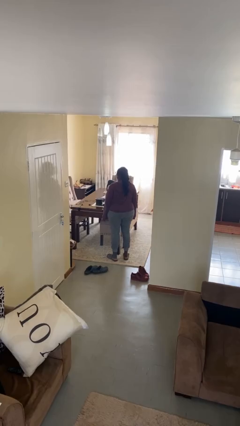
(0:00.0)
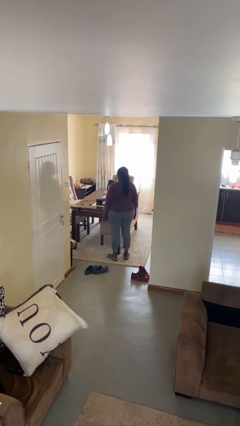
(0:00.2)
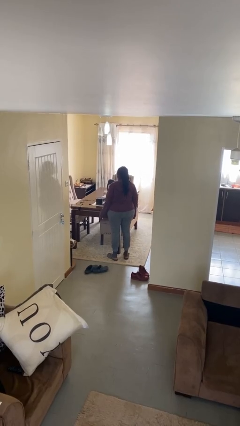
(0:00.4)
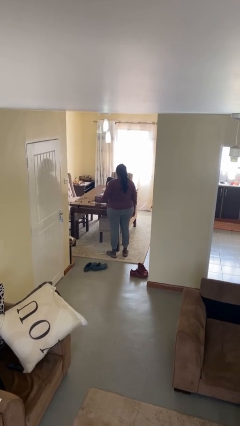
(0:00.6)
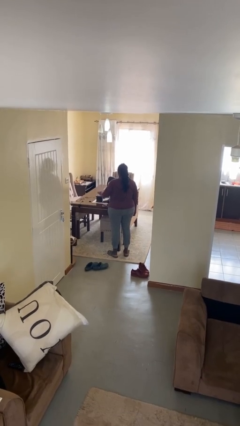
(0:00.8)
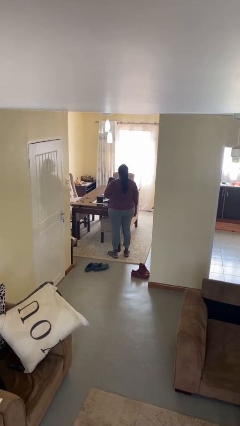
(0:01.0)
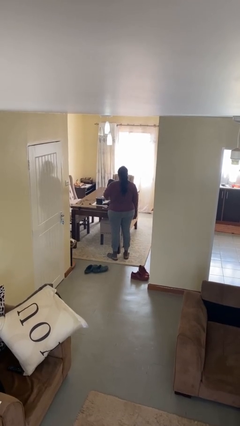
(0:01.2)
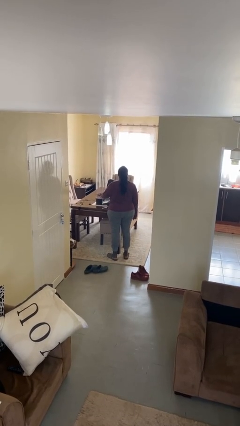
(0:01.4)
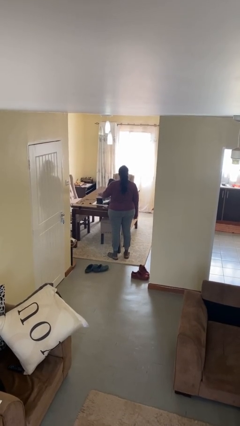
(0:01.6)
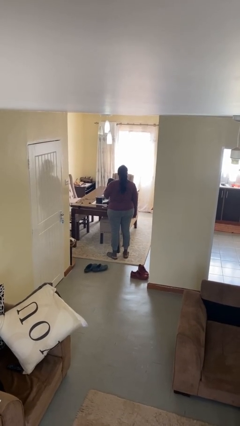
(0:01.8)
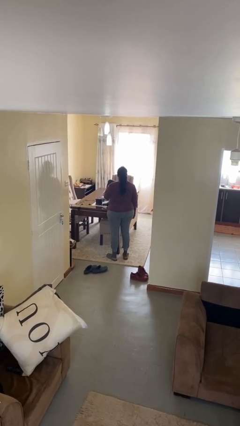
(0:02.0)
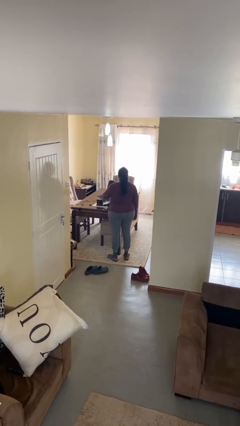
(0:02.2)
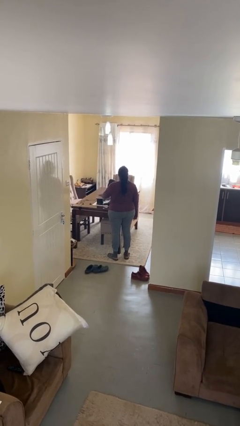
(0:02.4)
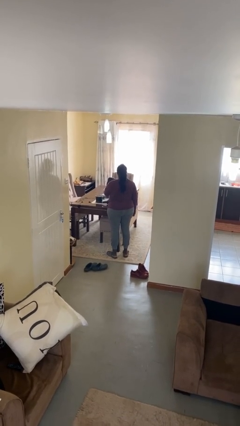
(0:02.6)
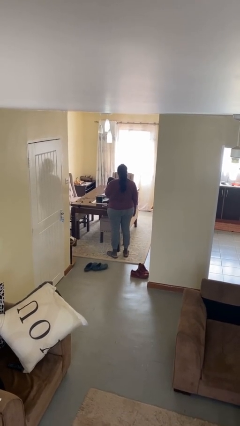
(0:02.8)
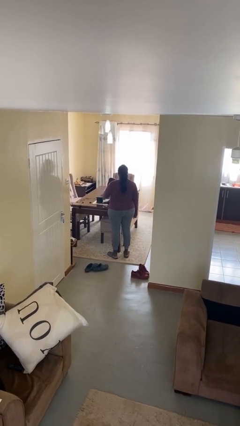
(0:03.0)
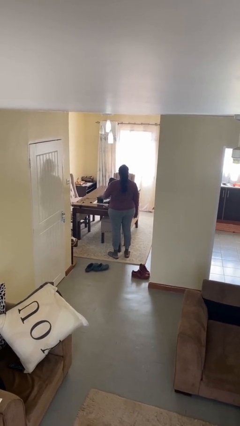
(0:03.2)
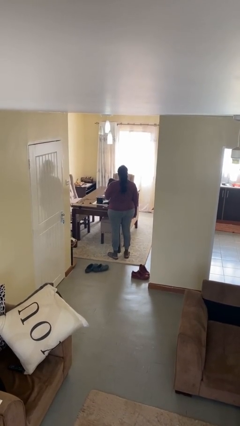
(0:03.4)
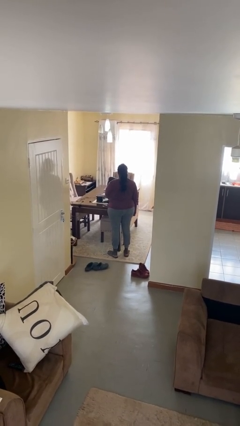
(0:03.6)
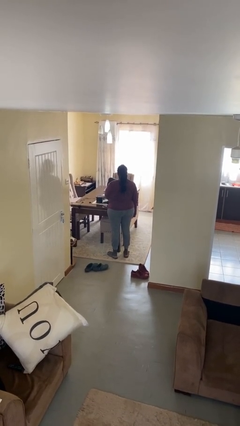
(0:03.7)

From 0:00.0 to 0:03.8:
person waves hand over object

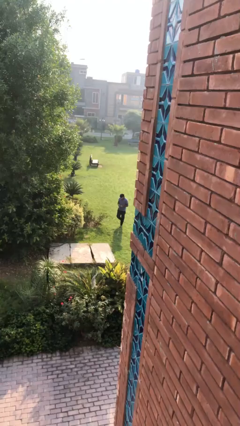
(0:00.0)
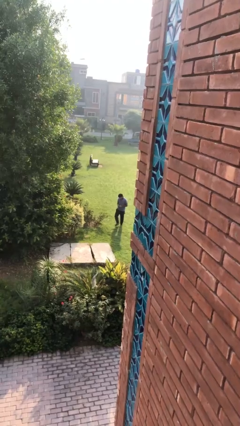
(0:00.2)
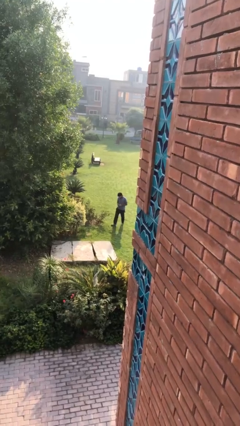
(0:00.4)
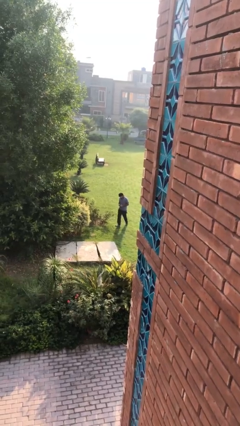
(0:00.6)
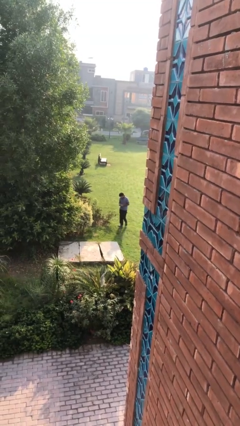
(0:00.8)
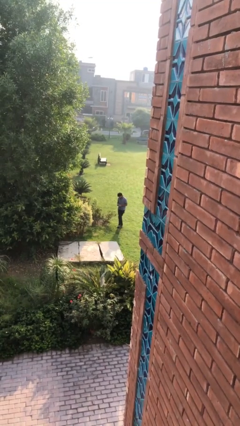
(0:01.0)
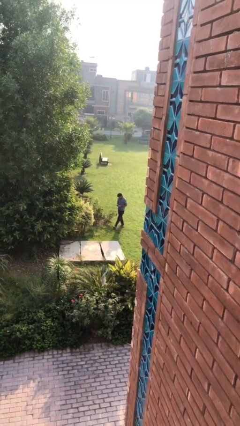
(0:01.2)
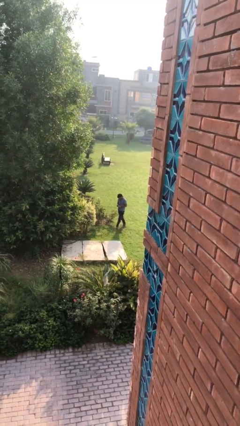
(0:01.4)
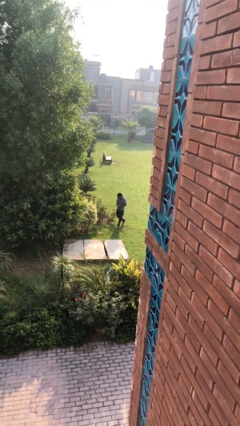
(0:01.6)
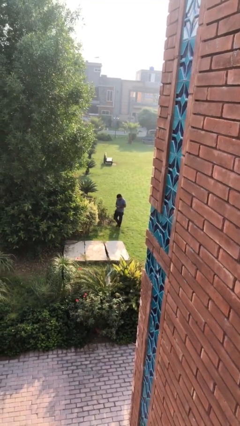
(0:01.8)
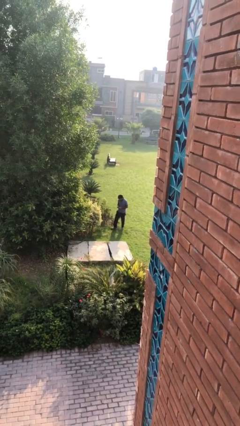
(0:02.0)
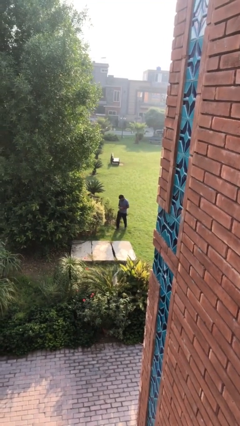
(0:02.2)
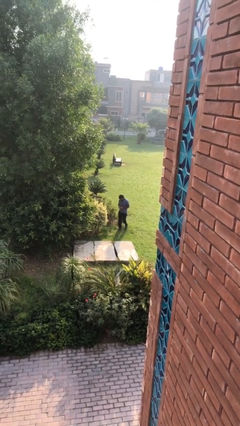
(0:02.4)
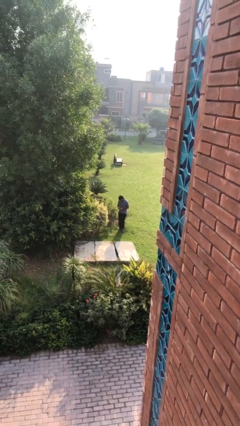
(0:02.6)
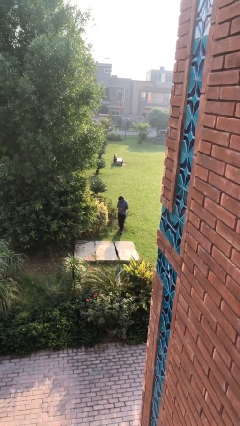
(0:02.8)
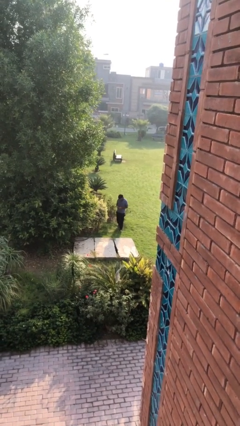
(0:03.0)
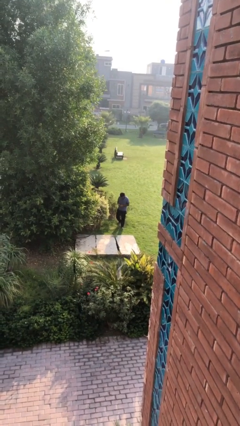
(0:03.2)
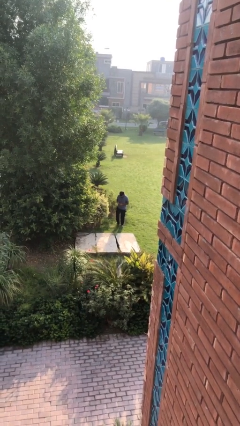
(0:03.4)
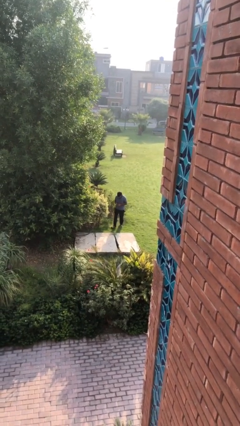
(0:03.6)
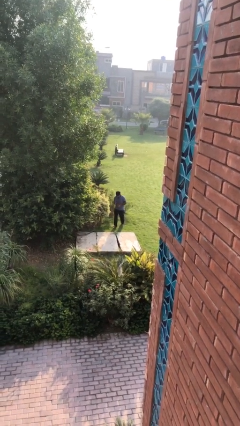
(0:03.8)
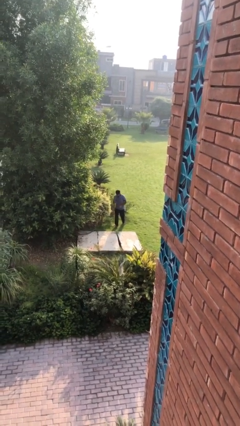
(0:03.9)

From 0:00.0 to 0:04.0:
person texts on phone

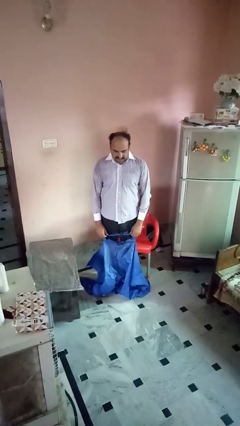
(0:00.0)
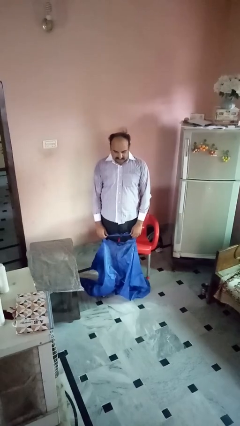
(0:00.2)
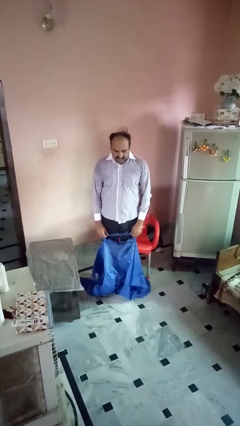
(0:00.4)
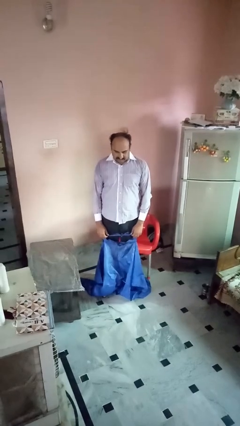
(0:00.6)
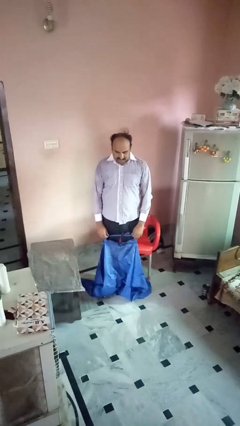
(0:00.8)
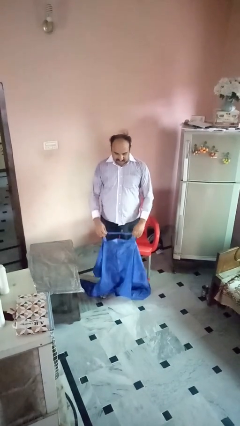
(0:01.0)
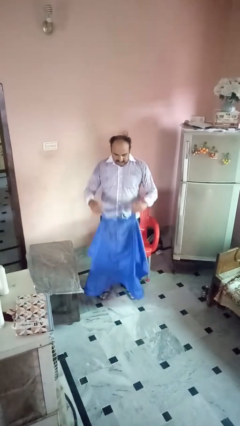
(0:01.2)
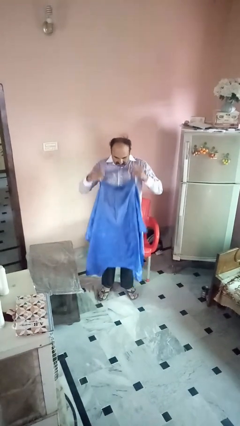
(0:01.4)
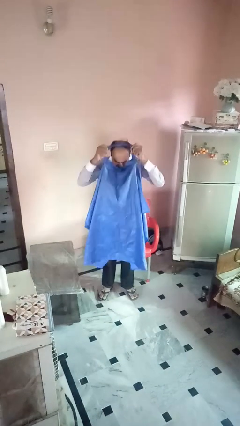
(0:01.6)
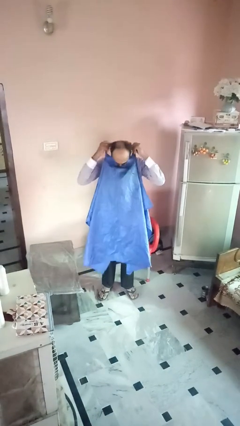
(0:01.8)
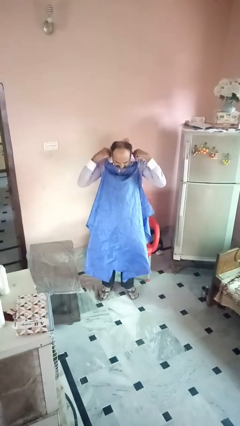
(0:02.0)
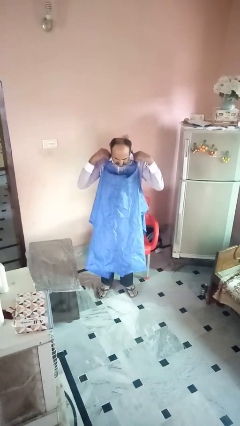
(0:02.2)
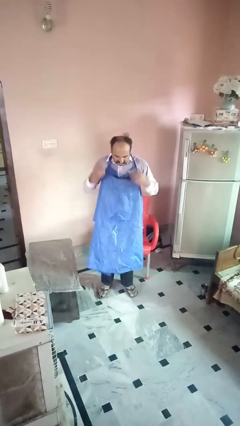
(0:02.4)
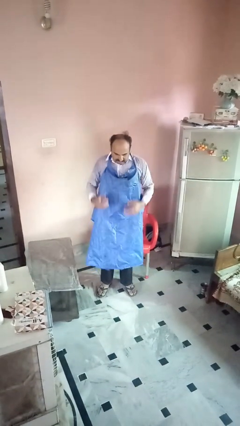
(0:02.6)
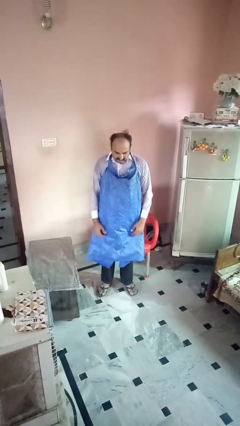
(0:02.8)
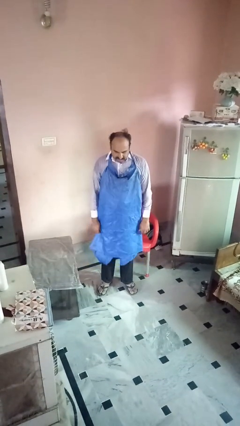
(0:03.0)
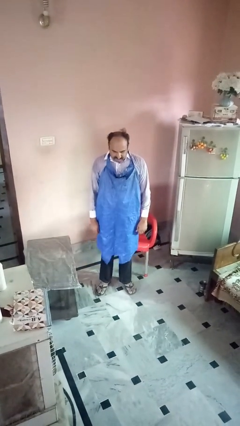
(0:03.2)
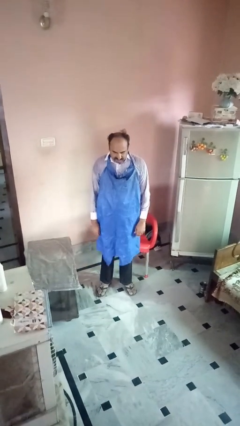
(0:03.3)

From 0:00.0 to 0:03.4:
person puts on apron

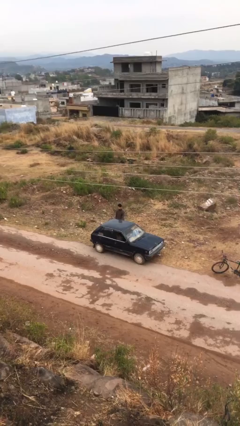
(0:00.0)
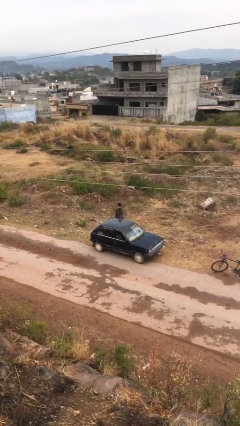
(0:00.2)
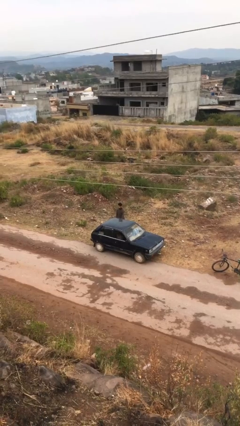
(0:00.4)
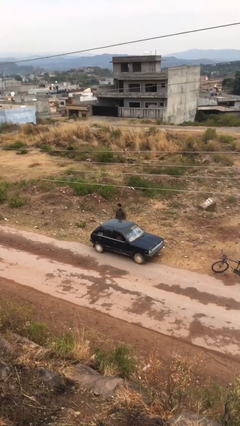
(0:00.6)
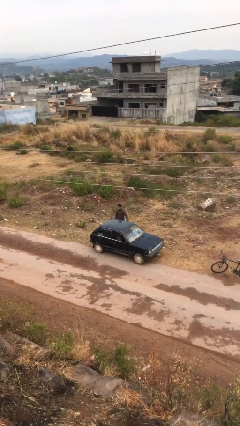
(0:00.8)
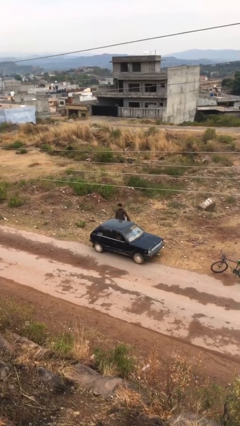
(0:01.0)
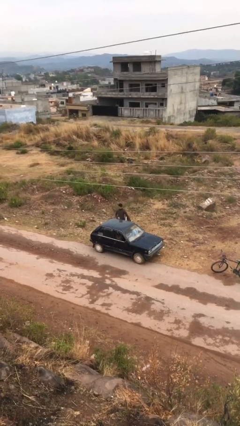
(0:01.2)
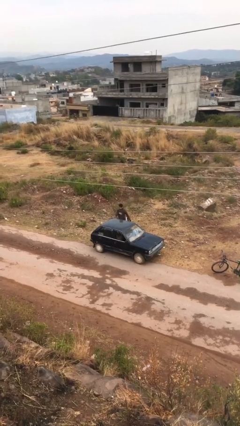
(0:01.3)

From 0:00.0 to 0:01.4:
person opens car door

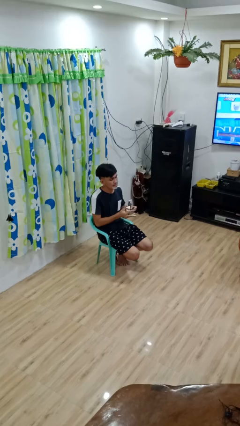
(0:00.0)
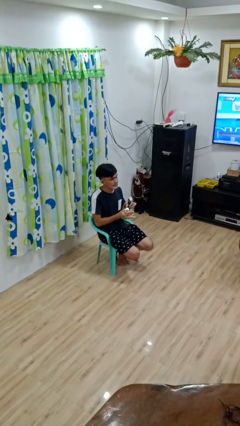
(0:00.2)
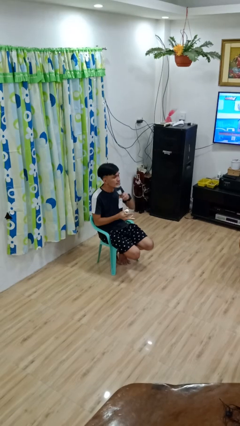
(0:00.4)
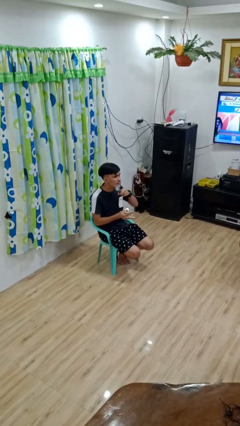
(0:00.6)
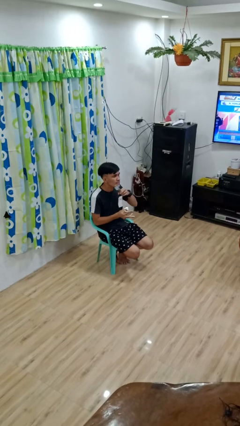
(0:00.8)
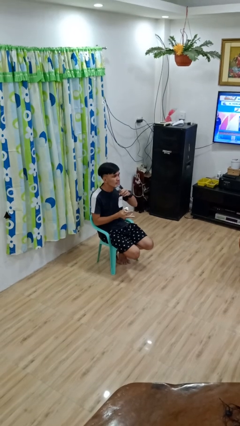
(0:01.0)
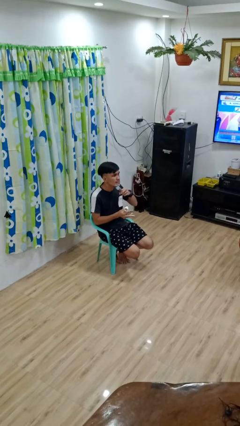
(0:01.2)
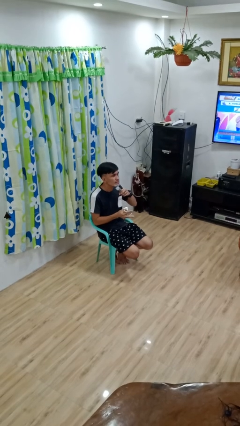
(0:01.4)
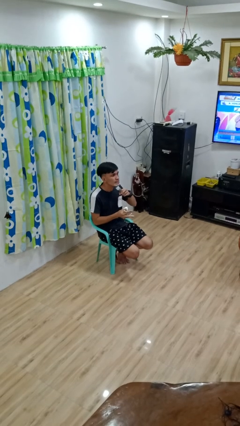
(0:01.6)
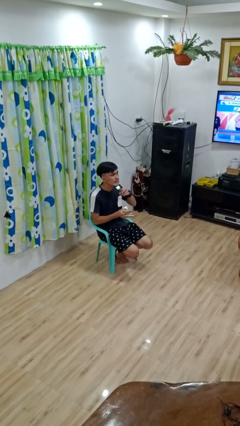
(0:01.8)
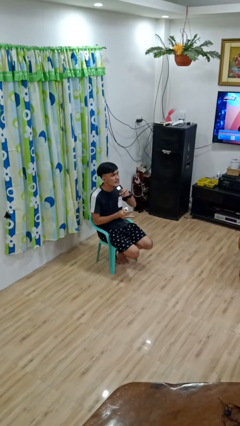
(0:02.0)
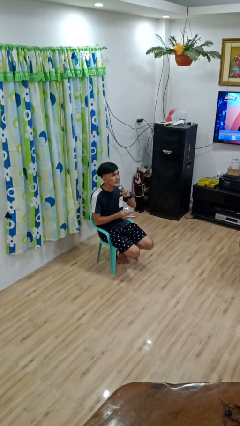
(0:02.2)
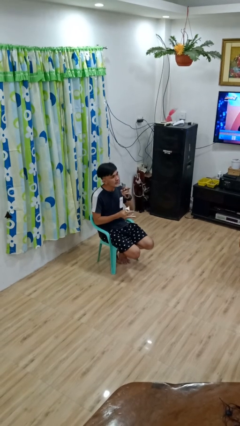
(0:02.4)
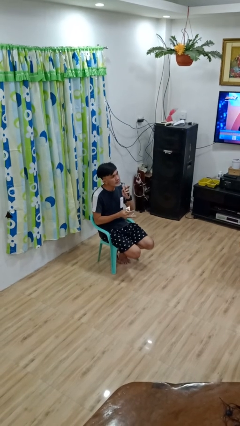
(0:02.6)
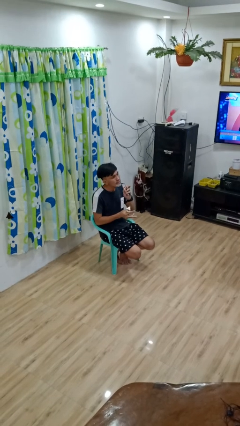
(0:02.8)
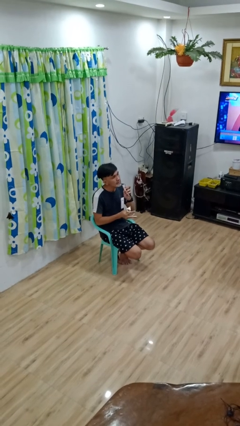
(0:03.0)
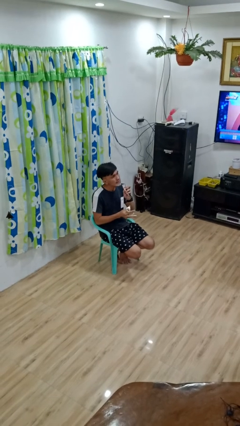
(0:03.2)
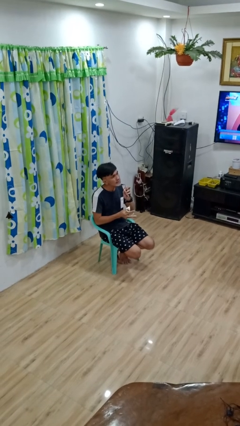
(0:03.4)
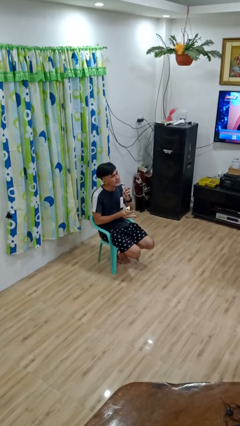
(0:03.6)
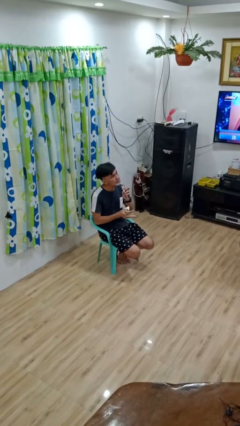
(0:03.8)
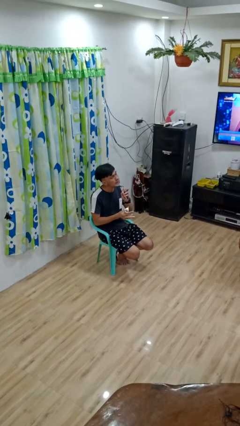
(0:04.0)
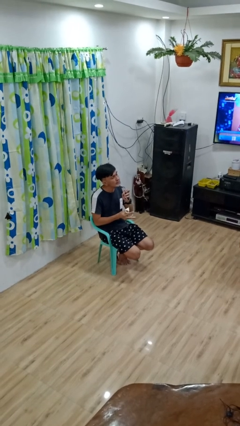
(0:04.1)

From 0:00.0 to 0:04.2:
person shaves face

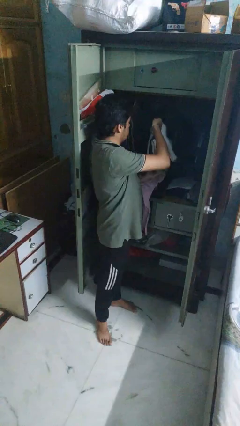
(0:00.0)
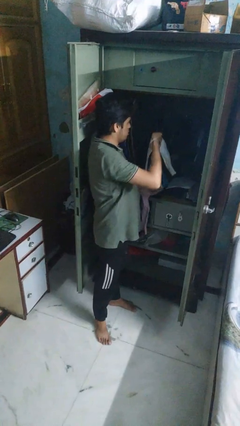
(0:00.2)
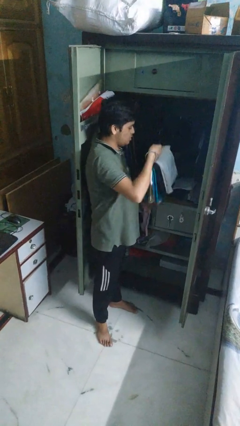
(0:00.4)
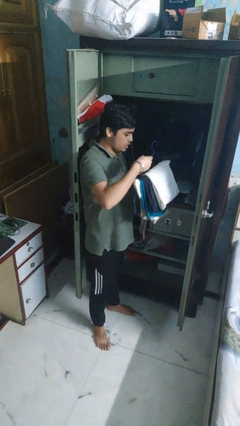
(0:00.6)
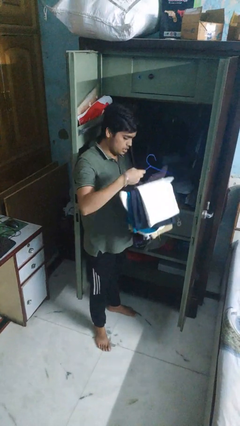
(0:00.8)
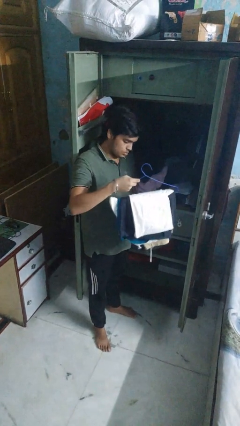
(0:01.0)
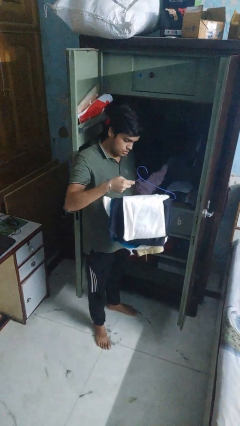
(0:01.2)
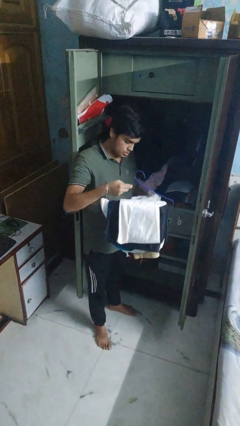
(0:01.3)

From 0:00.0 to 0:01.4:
person takes clothes from closet
